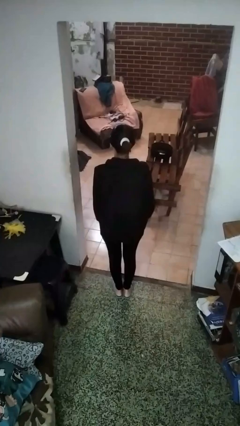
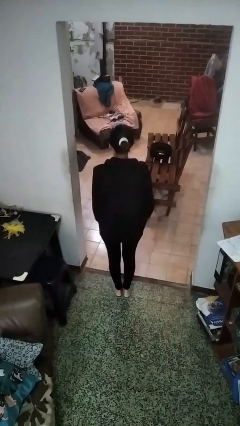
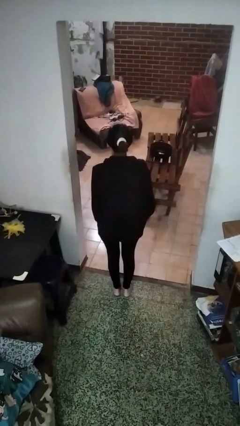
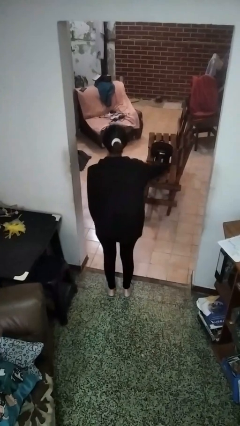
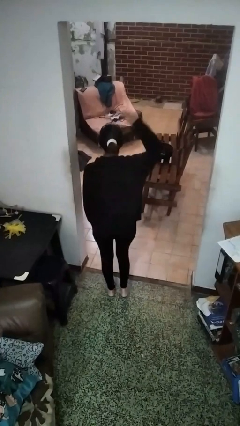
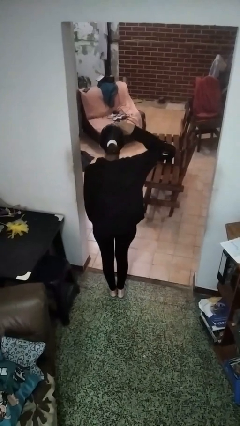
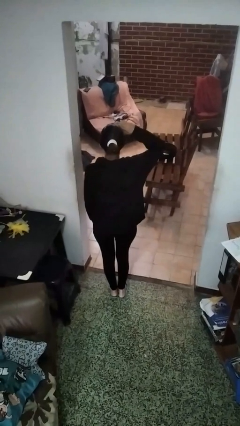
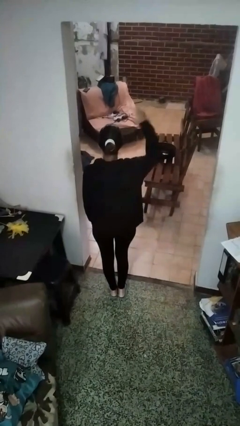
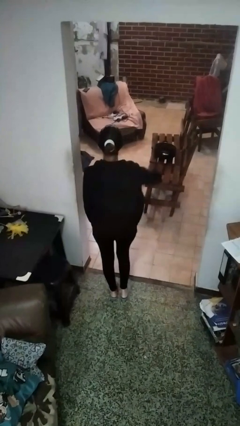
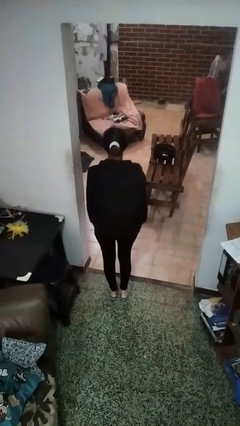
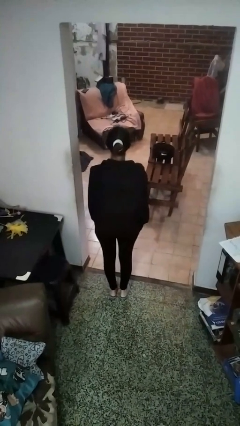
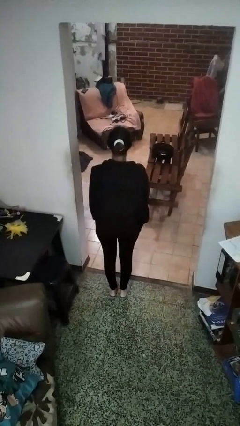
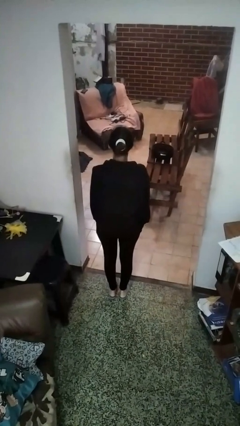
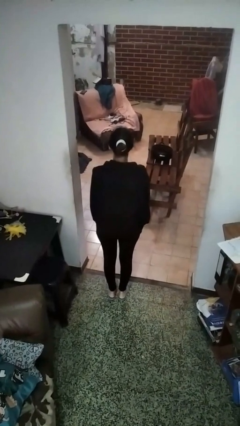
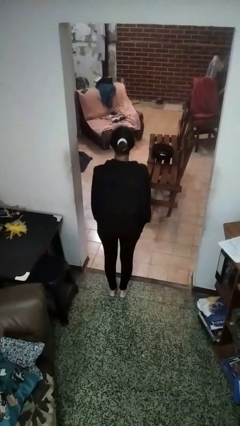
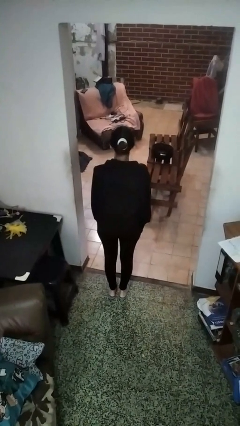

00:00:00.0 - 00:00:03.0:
person salutes

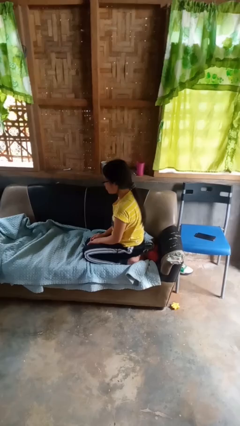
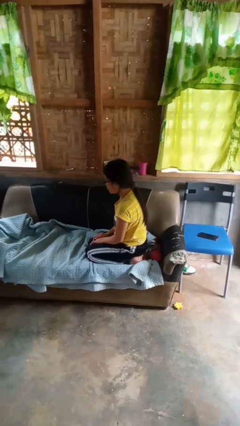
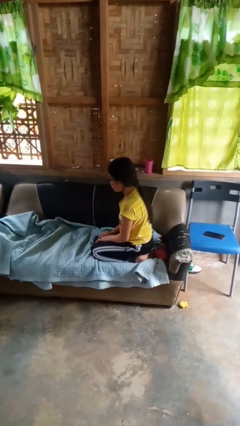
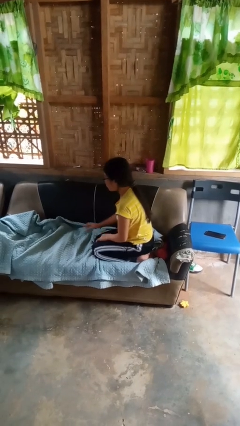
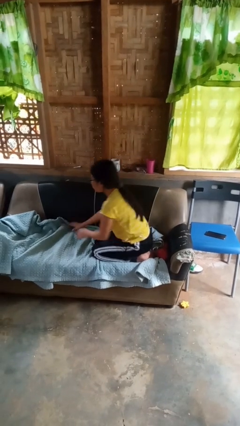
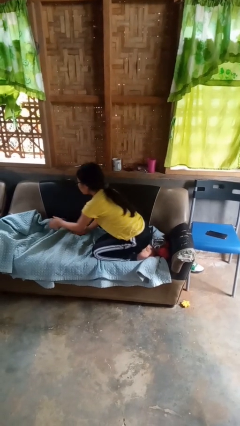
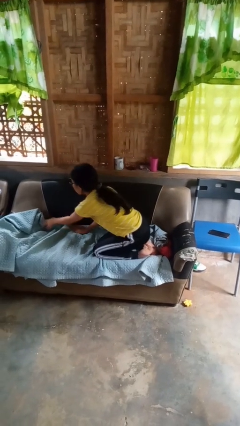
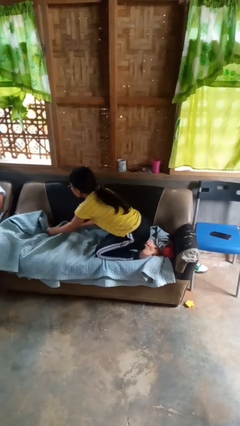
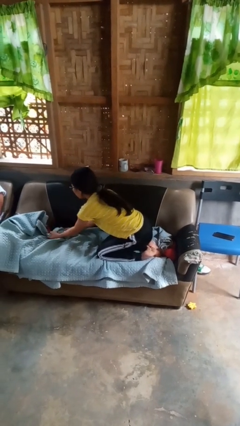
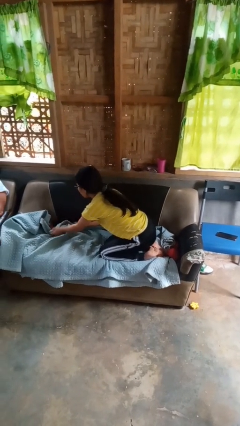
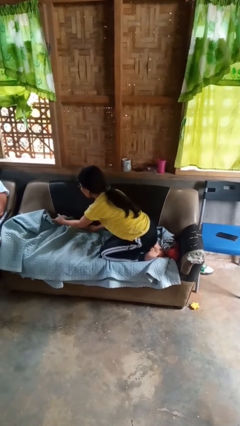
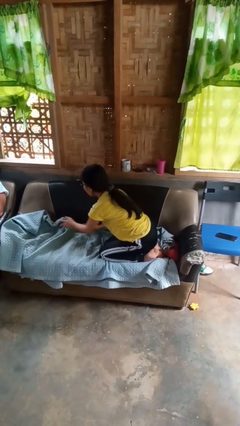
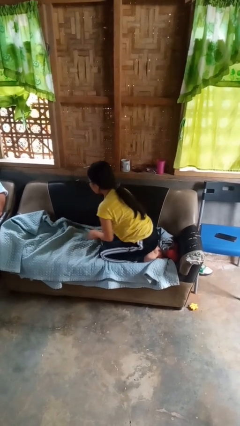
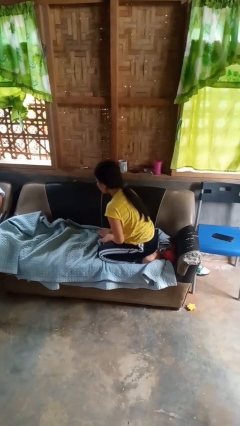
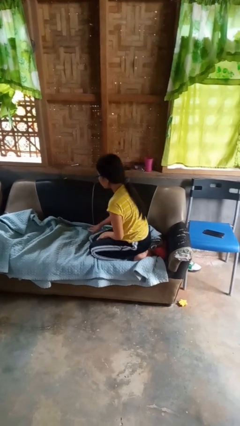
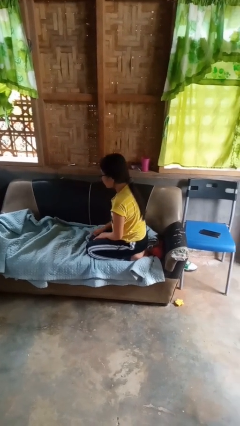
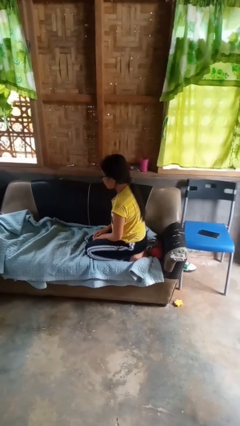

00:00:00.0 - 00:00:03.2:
person searches in couch

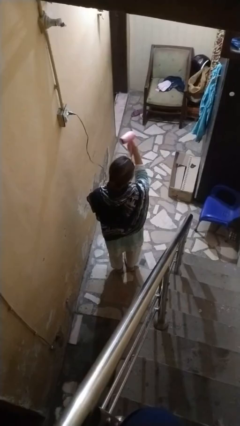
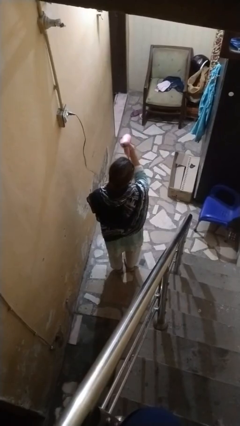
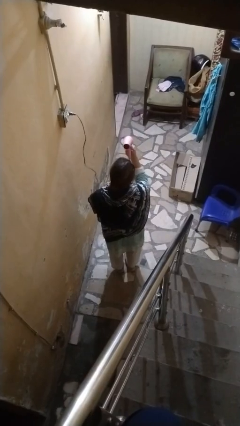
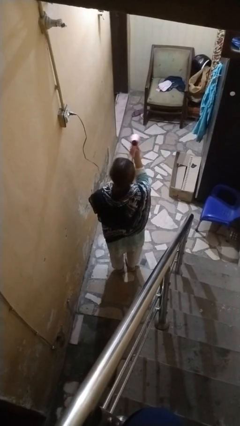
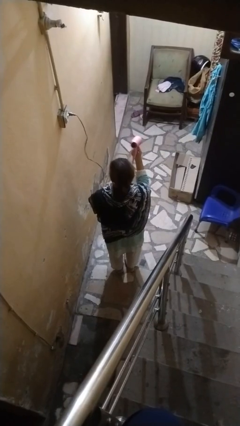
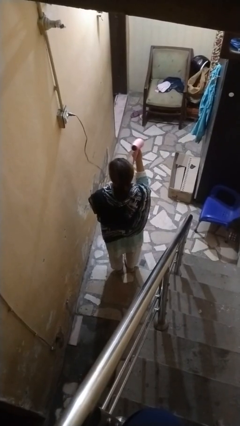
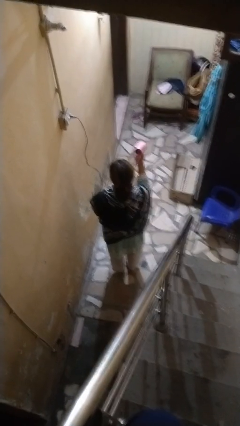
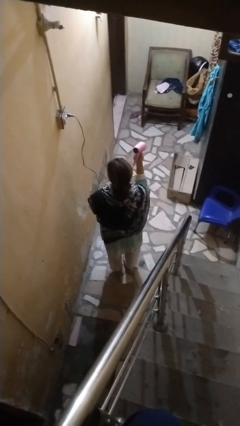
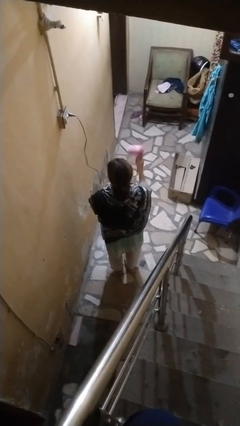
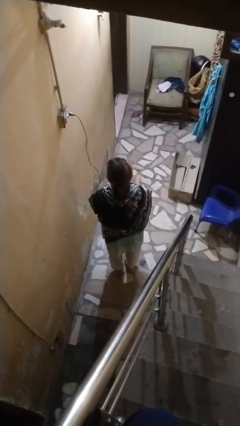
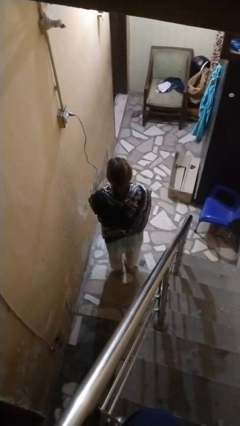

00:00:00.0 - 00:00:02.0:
person dries hair with hairdryer

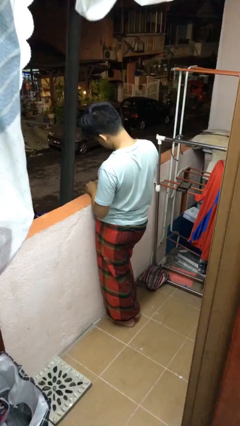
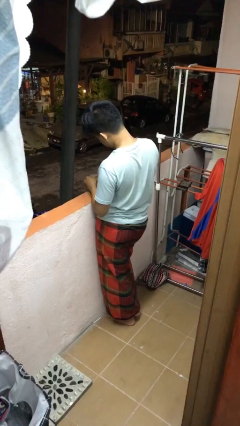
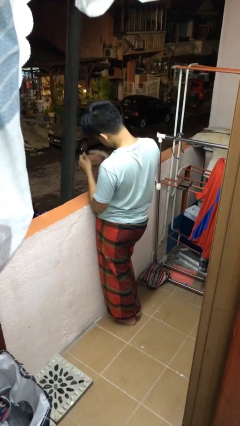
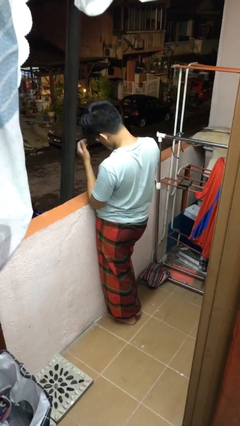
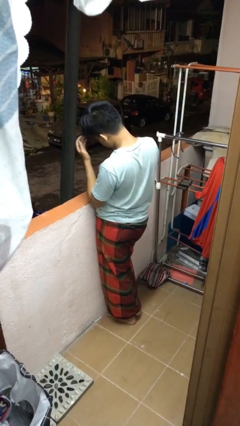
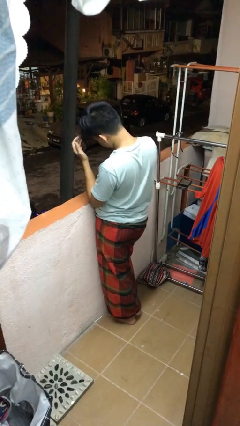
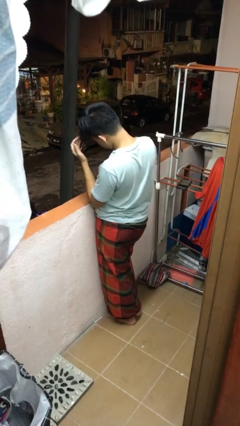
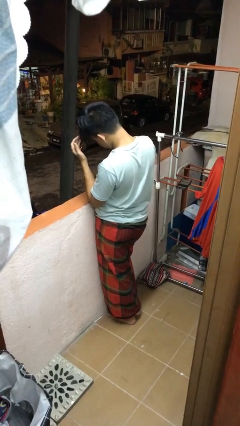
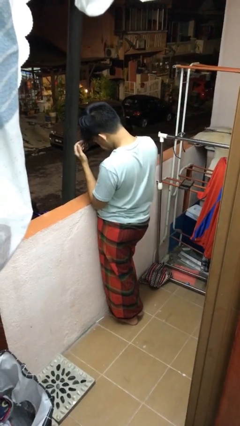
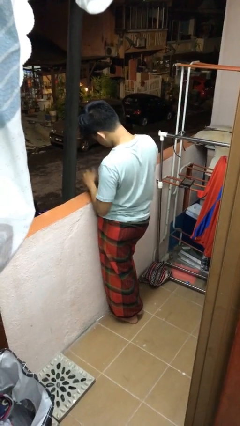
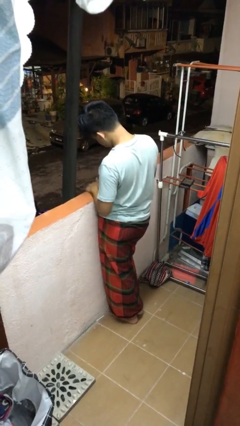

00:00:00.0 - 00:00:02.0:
person prays

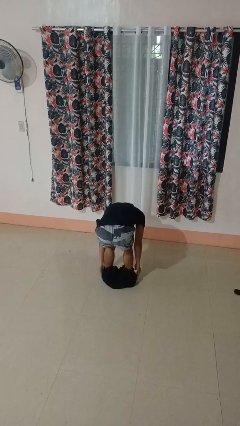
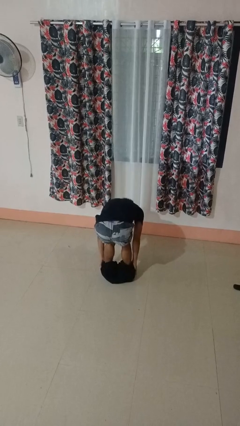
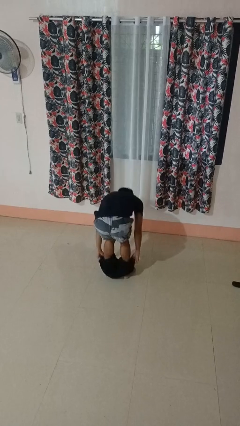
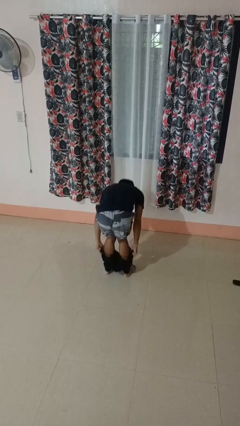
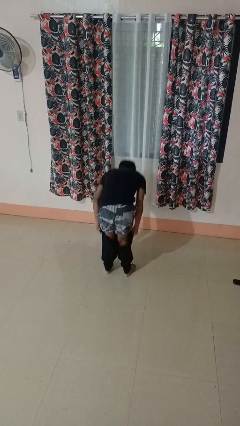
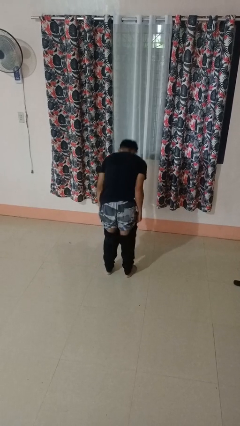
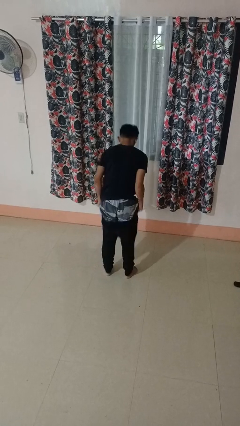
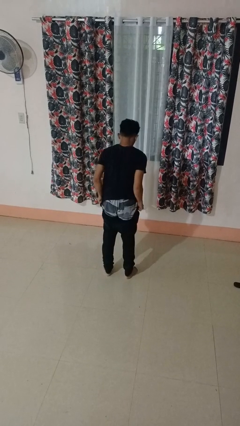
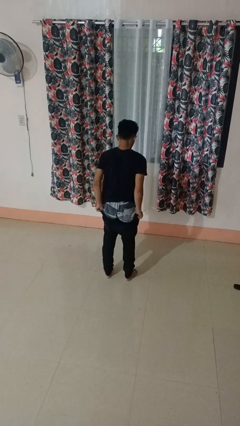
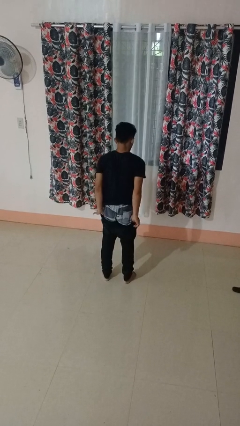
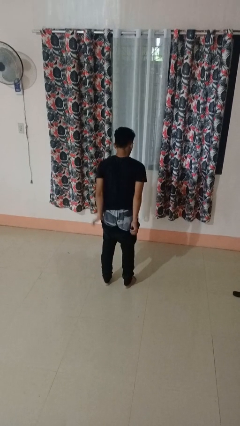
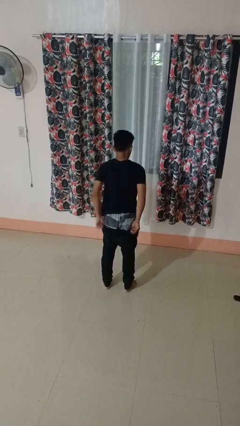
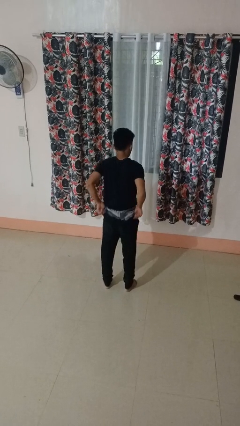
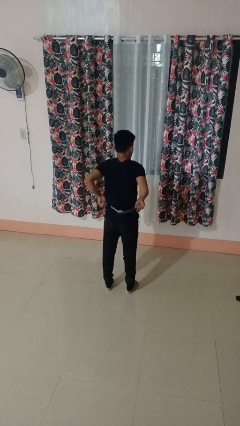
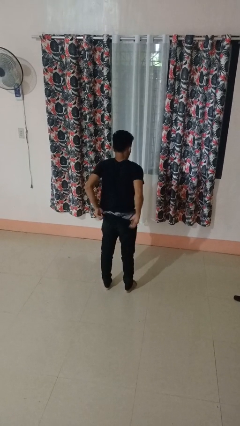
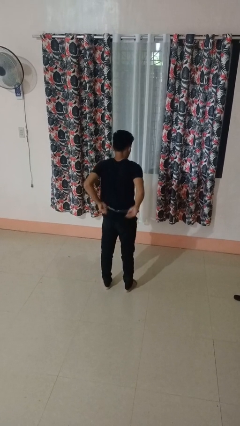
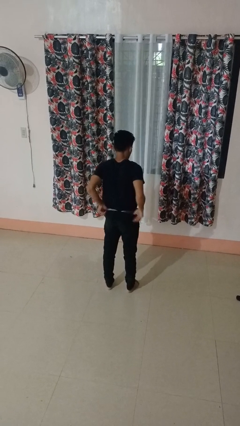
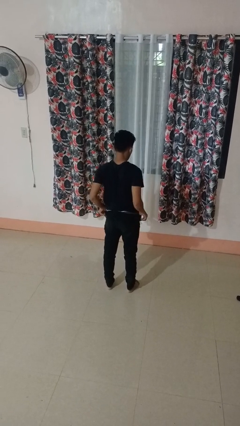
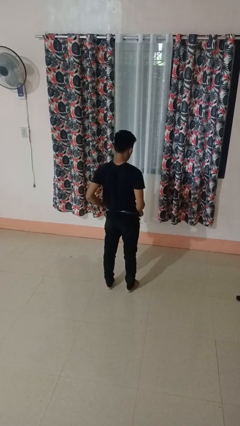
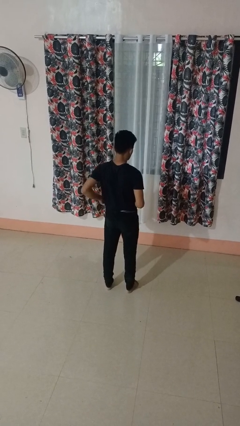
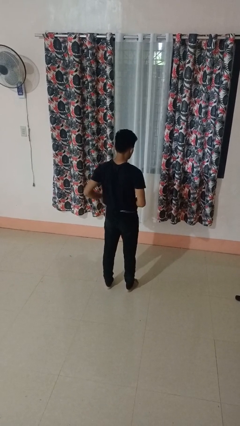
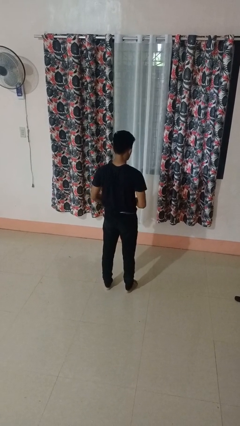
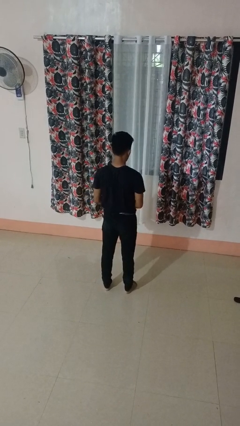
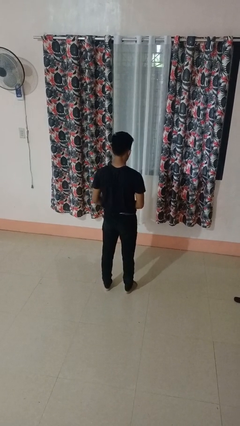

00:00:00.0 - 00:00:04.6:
person puts on pants

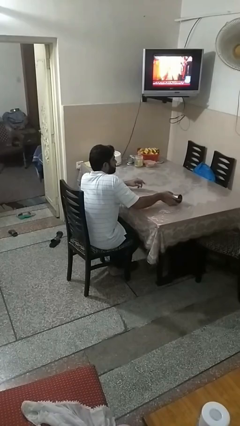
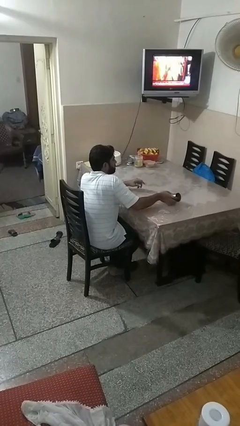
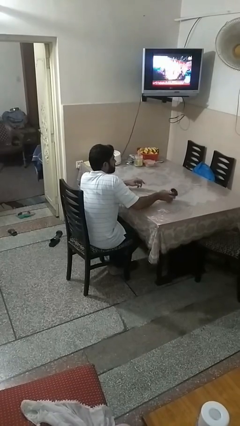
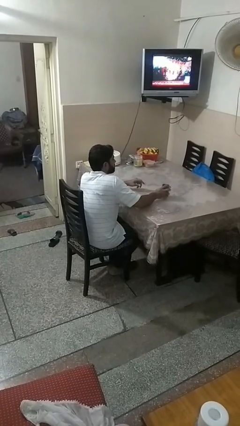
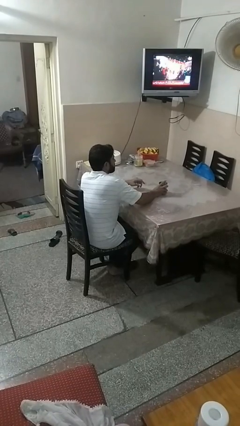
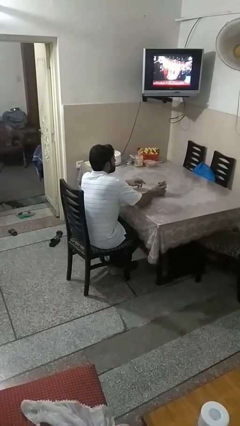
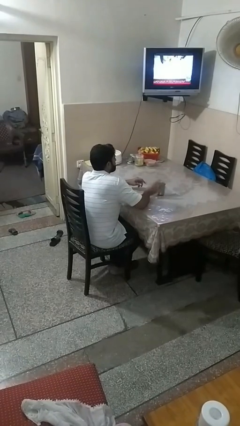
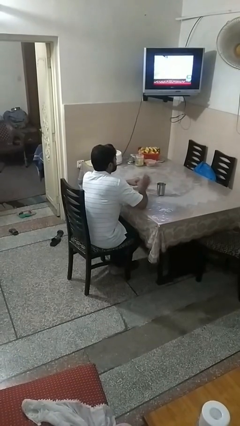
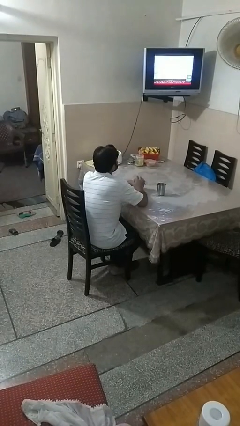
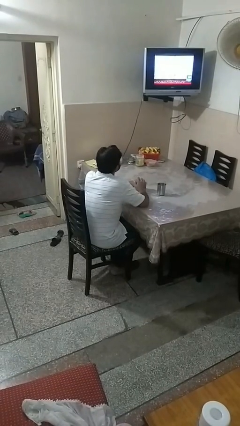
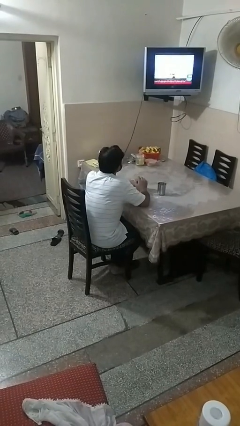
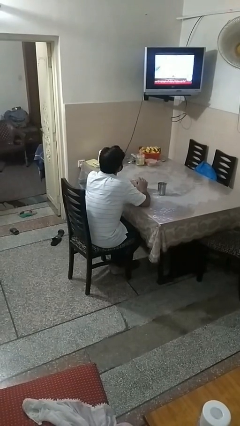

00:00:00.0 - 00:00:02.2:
person sets upright glass

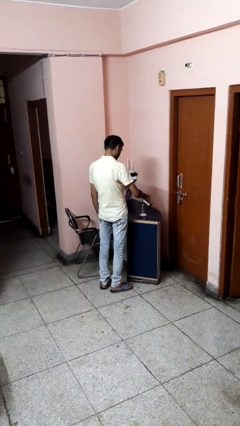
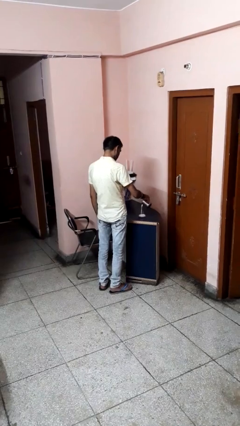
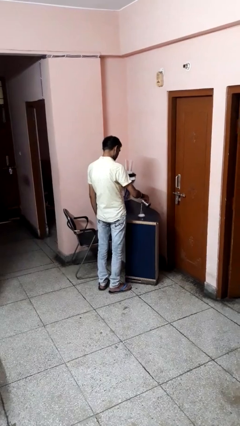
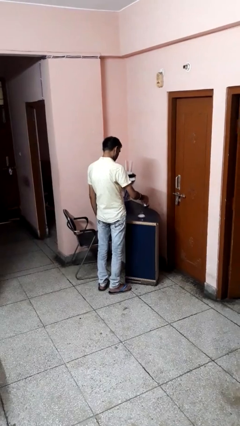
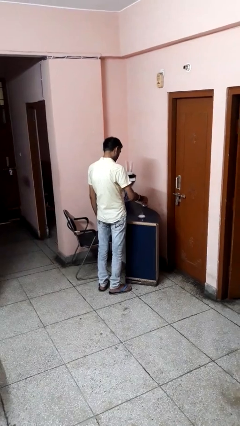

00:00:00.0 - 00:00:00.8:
person pours into bowl
